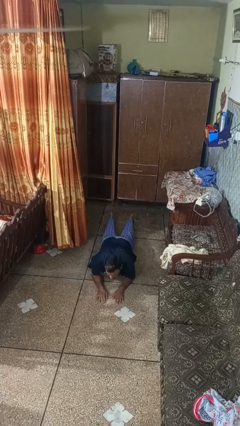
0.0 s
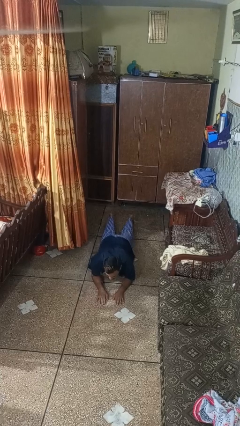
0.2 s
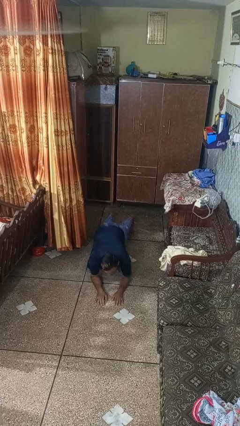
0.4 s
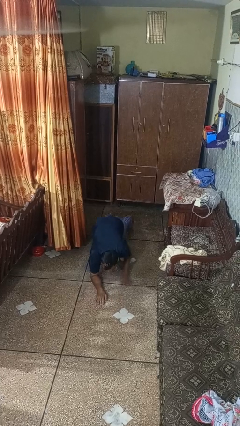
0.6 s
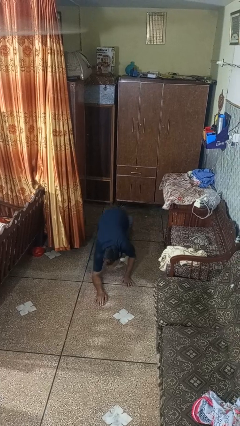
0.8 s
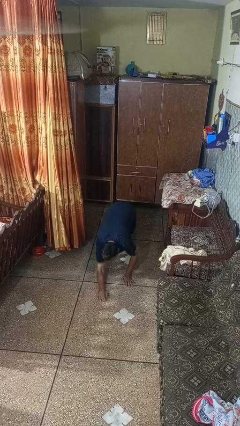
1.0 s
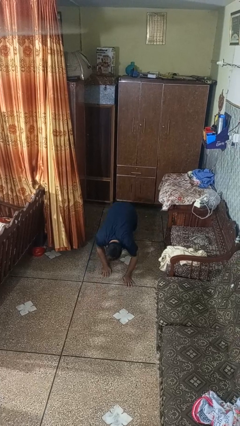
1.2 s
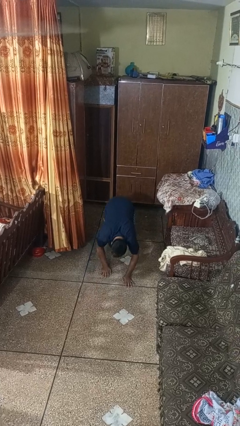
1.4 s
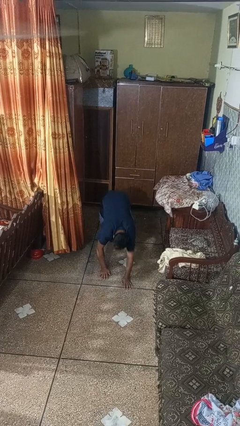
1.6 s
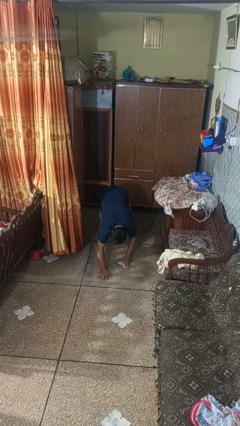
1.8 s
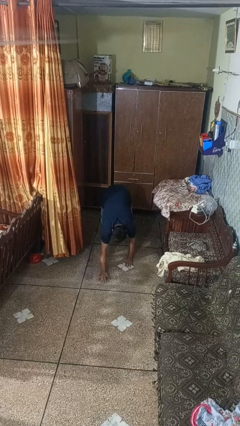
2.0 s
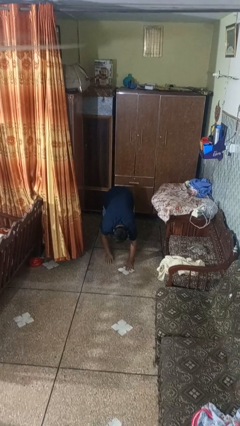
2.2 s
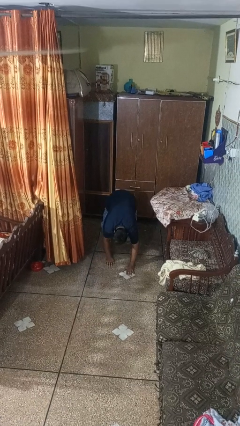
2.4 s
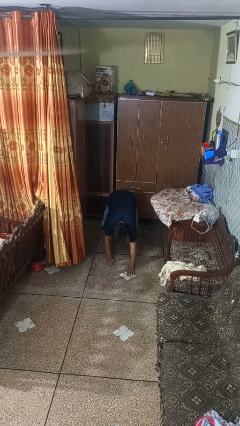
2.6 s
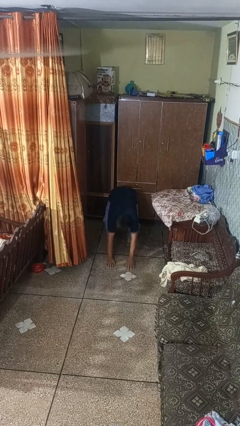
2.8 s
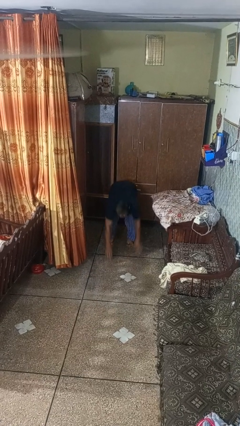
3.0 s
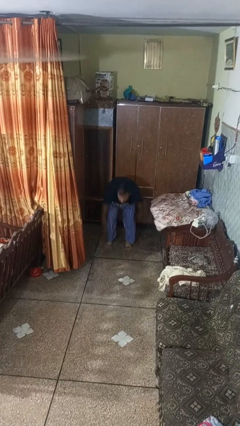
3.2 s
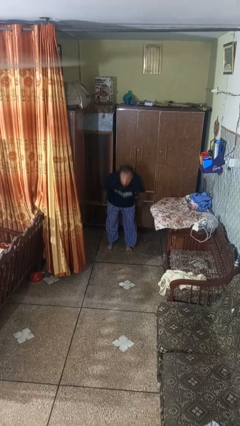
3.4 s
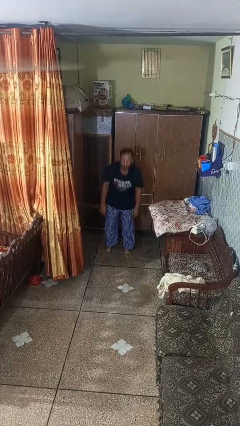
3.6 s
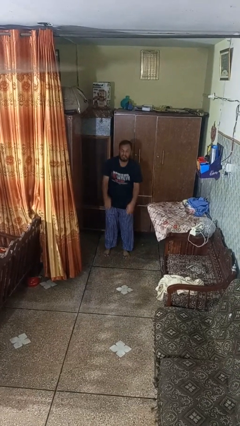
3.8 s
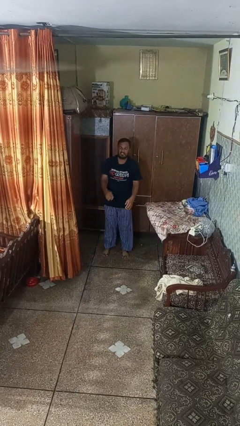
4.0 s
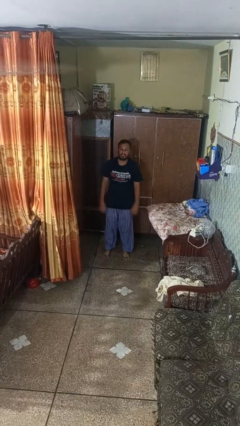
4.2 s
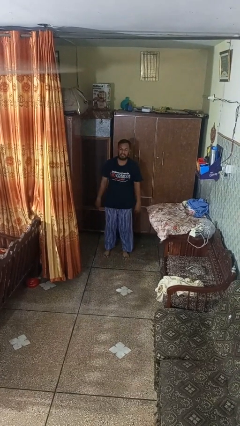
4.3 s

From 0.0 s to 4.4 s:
person stands up from floor

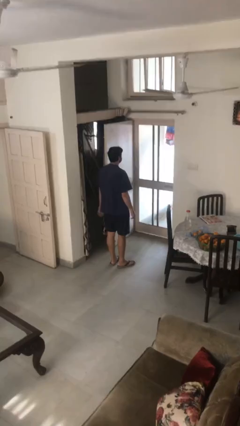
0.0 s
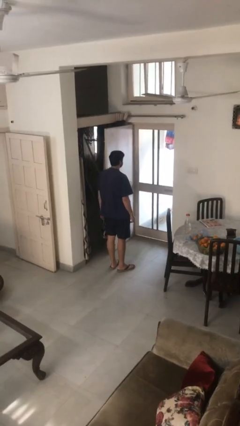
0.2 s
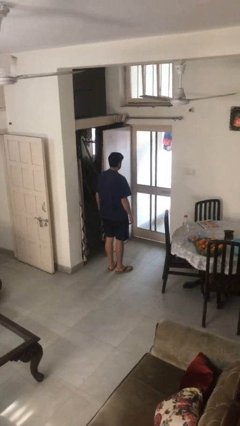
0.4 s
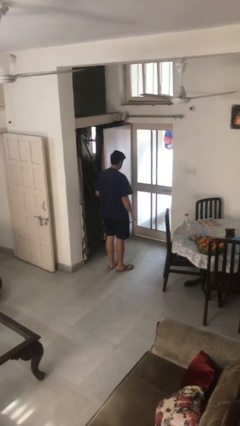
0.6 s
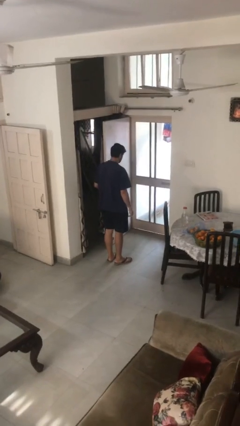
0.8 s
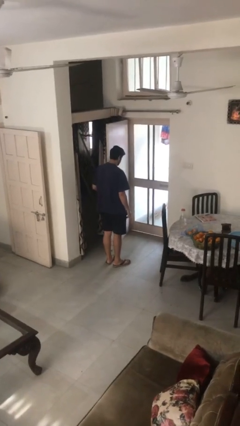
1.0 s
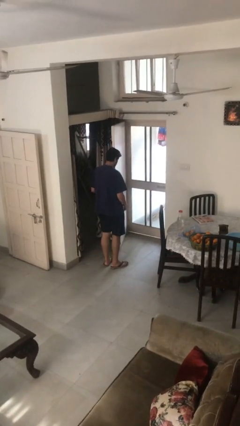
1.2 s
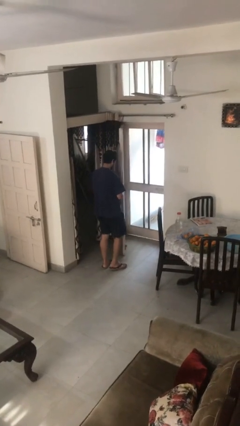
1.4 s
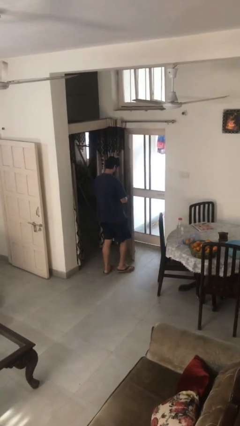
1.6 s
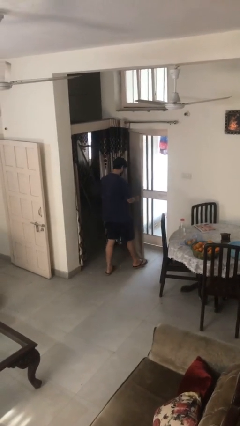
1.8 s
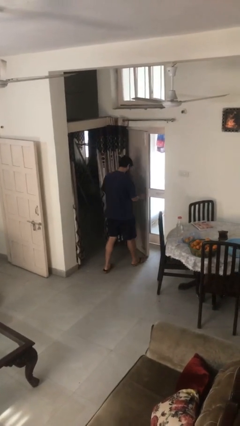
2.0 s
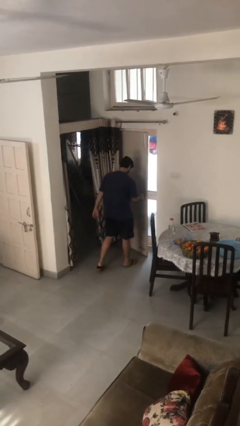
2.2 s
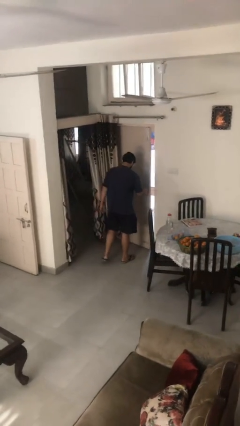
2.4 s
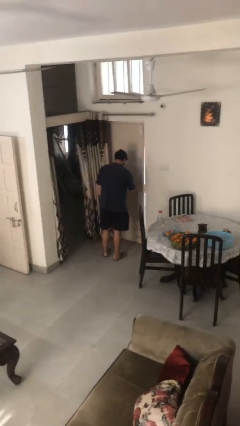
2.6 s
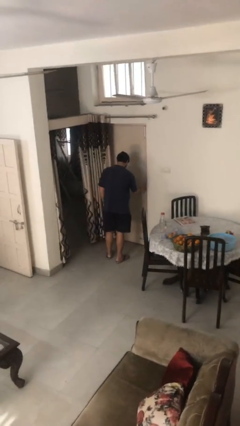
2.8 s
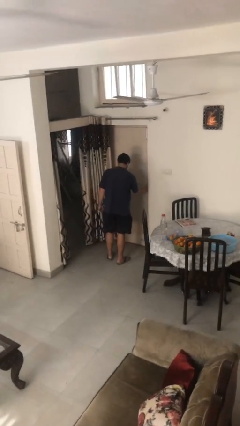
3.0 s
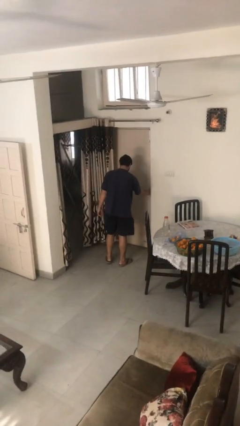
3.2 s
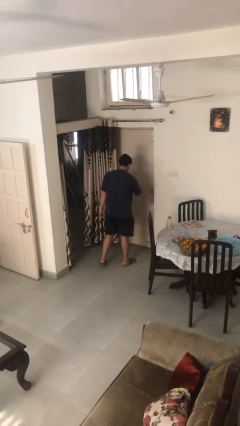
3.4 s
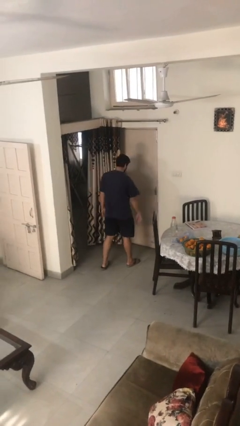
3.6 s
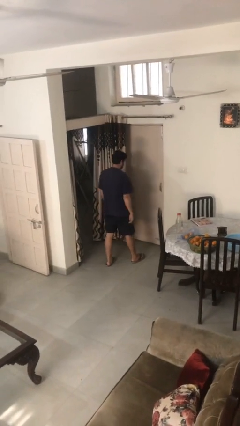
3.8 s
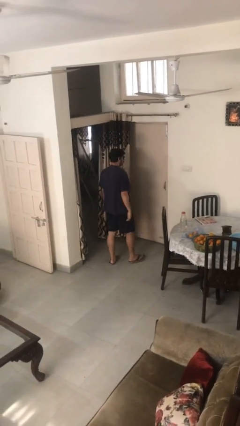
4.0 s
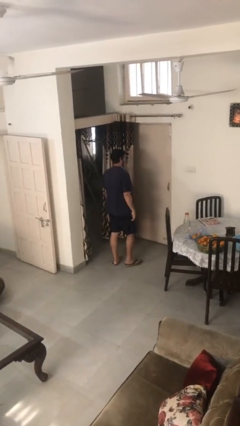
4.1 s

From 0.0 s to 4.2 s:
person closes facility door

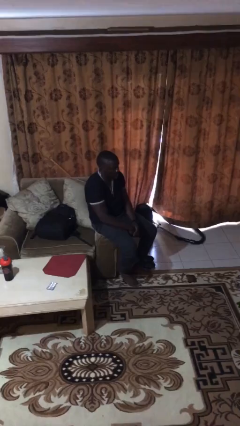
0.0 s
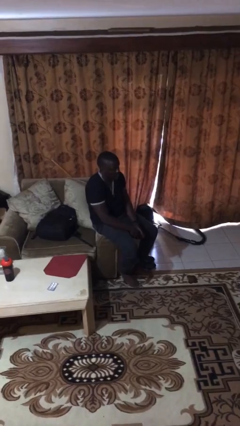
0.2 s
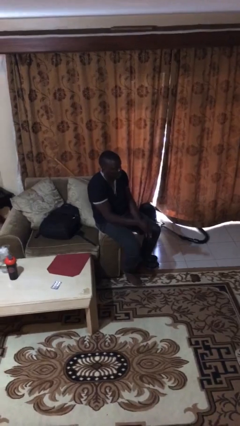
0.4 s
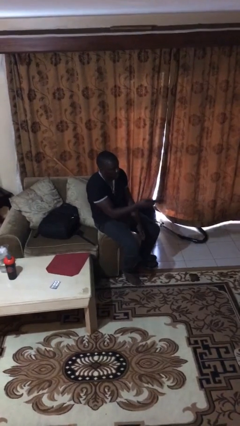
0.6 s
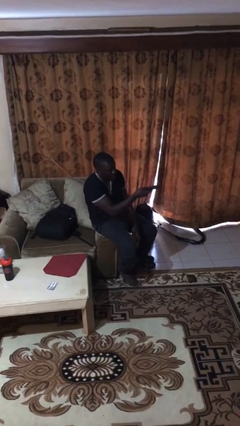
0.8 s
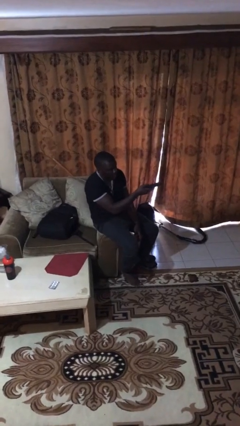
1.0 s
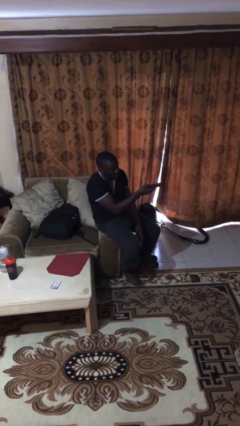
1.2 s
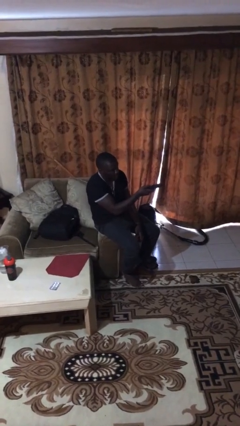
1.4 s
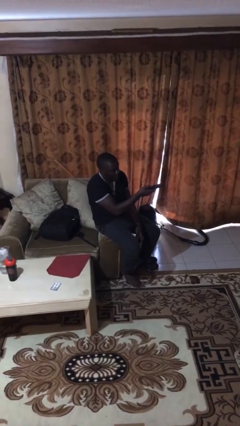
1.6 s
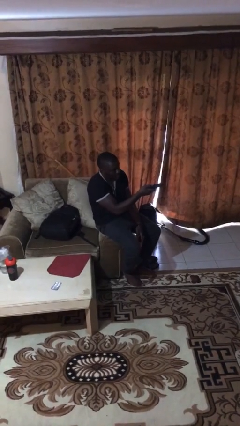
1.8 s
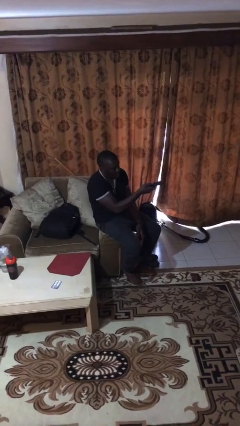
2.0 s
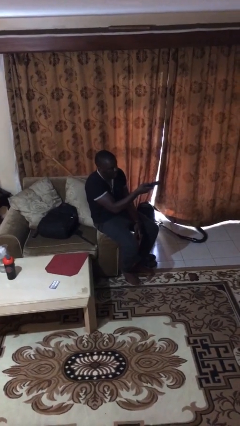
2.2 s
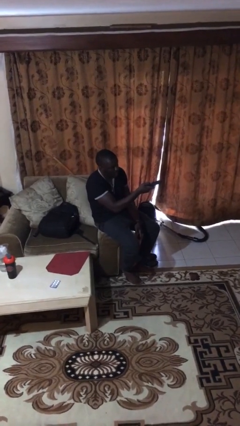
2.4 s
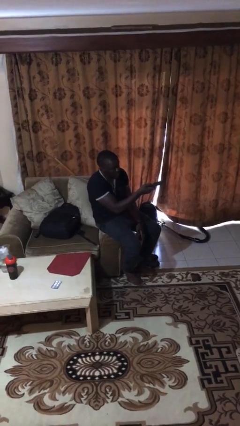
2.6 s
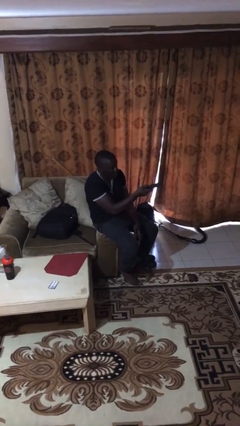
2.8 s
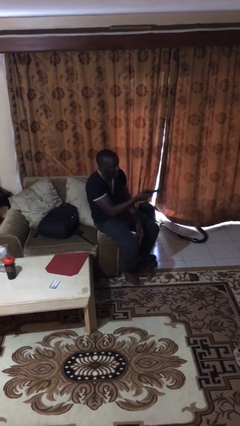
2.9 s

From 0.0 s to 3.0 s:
person uses television remote

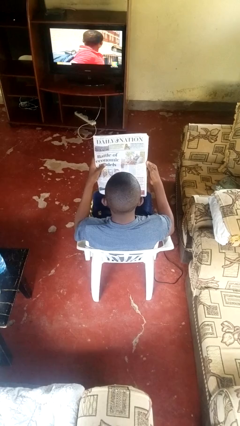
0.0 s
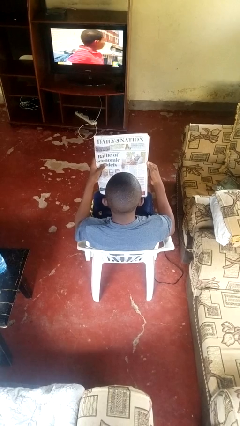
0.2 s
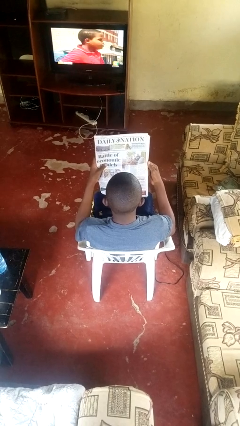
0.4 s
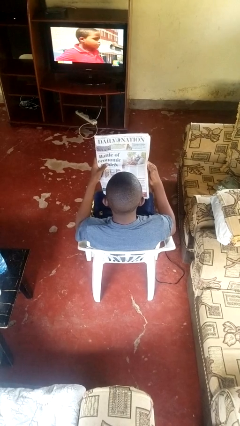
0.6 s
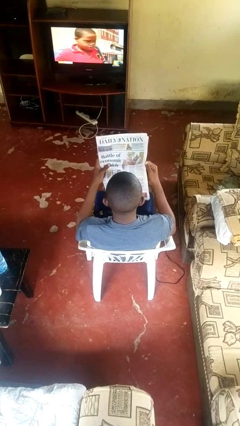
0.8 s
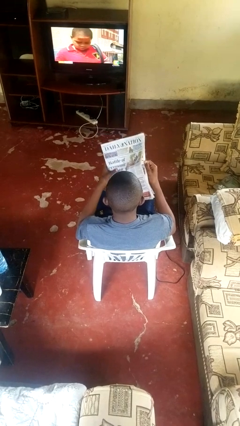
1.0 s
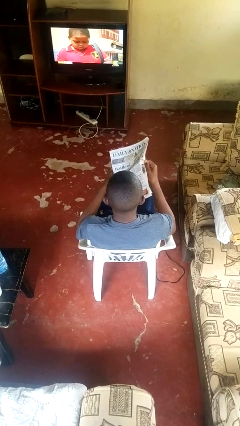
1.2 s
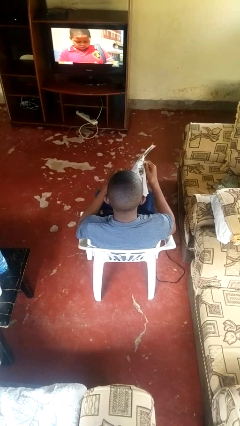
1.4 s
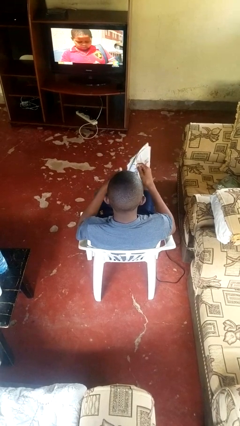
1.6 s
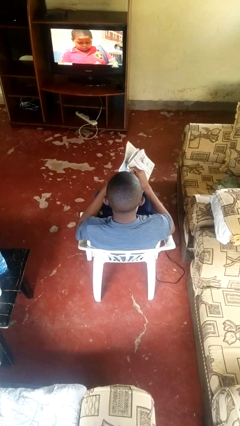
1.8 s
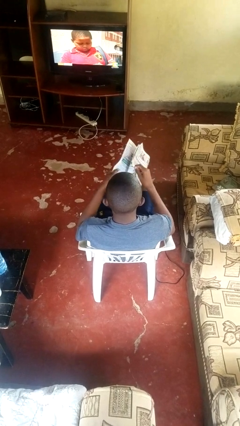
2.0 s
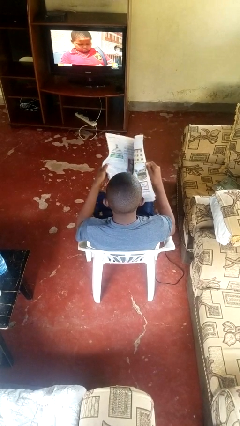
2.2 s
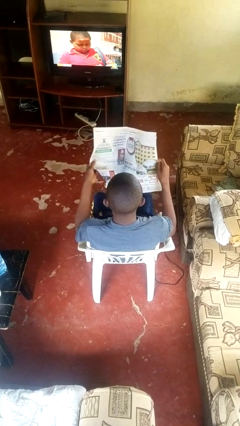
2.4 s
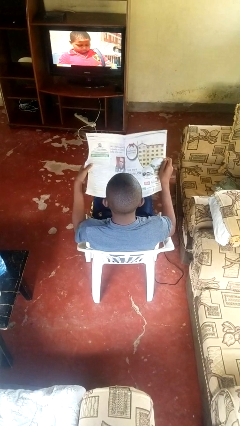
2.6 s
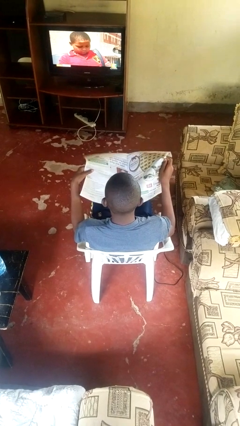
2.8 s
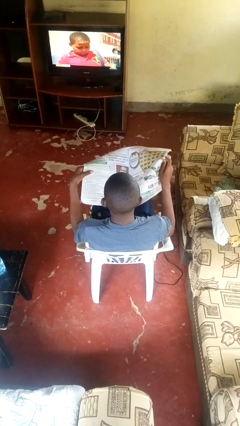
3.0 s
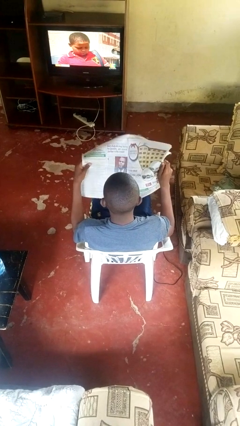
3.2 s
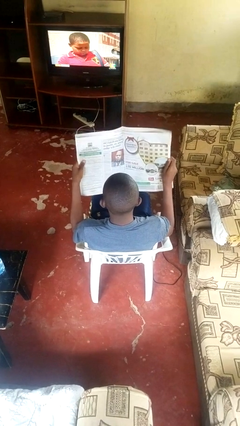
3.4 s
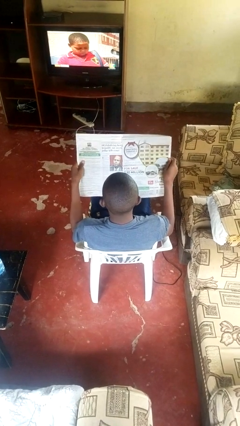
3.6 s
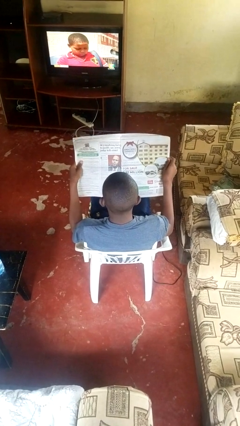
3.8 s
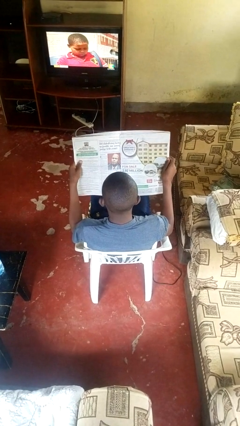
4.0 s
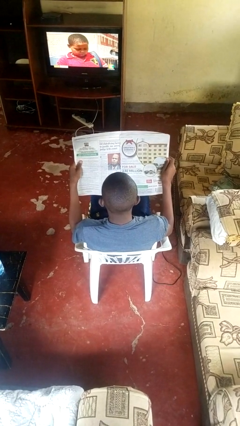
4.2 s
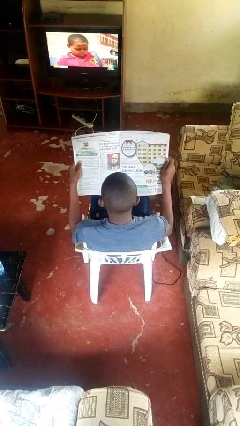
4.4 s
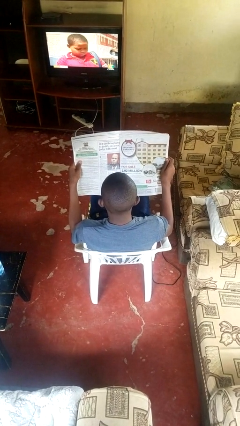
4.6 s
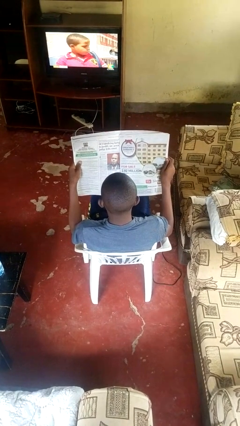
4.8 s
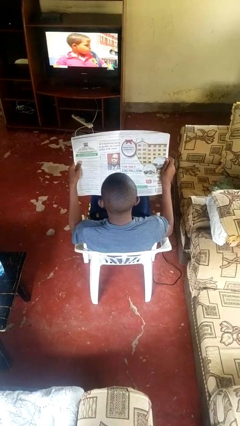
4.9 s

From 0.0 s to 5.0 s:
person reads newspaper

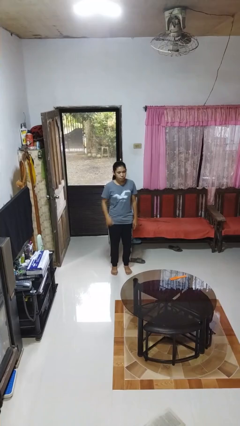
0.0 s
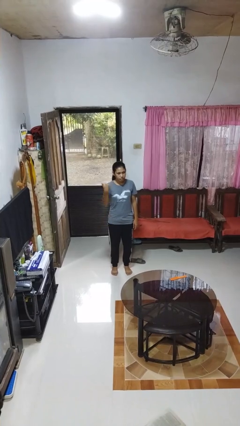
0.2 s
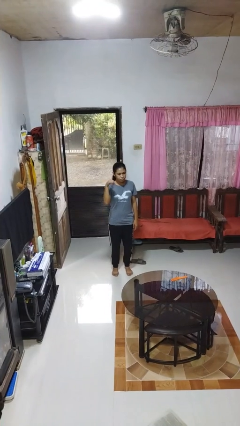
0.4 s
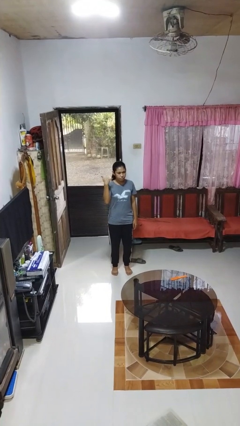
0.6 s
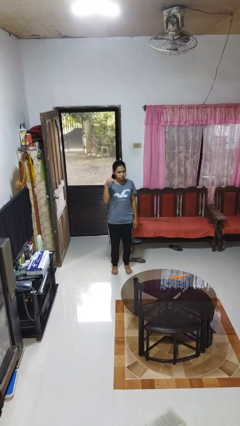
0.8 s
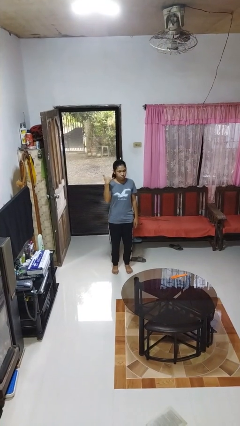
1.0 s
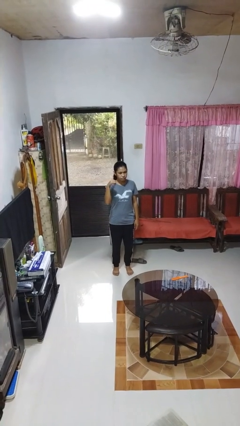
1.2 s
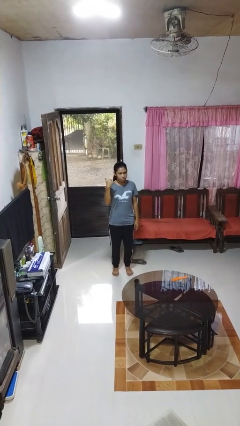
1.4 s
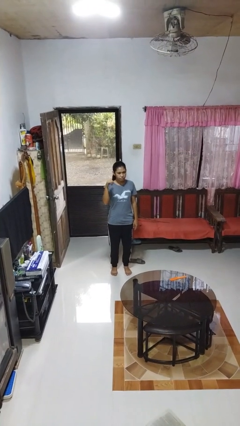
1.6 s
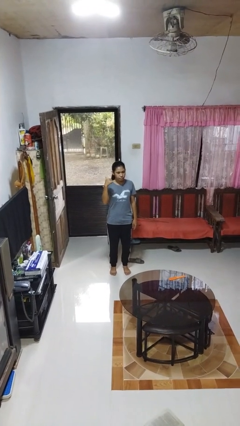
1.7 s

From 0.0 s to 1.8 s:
person gestures hang loose
